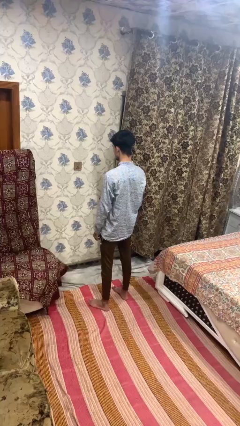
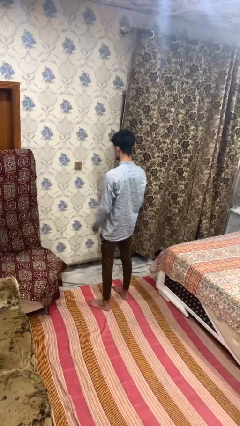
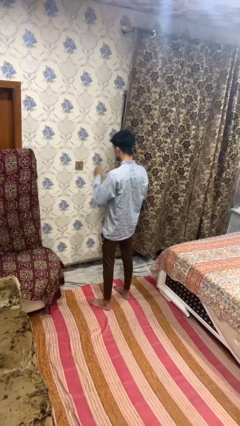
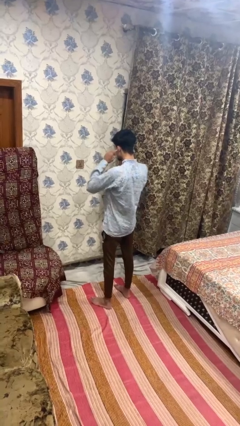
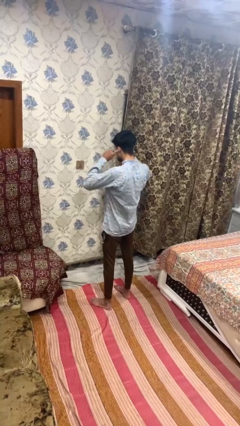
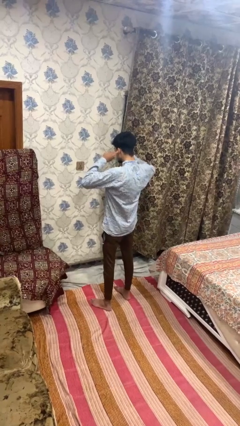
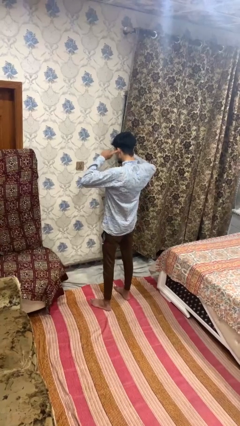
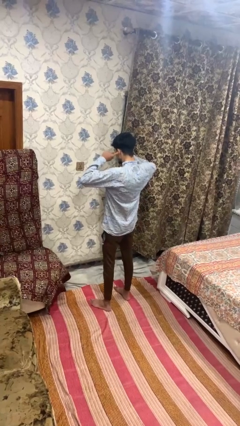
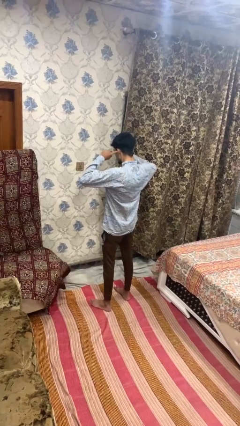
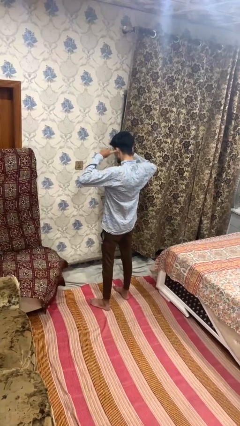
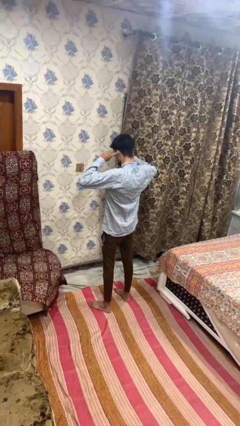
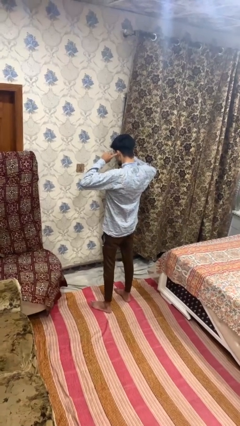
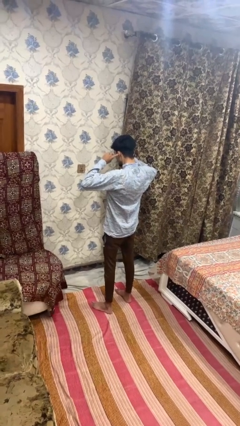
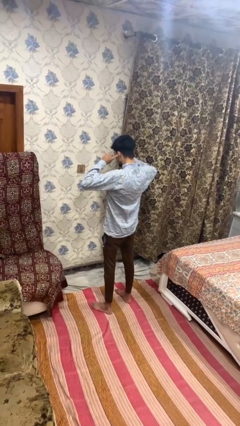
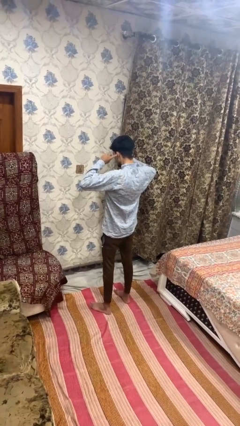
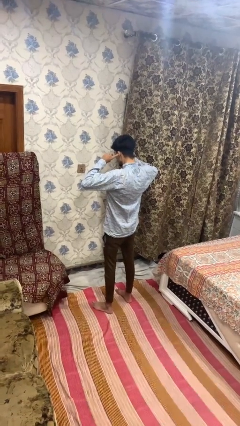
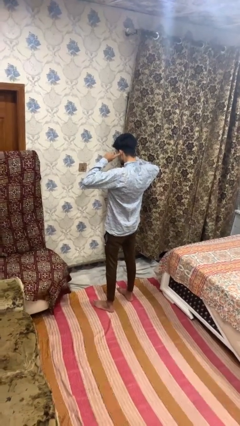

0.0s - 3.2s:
person puts fingers in ear

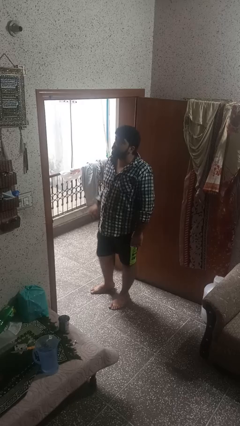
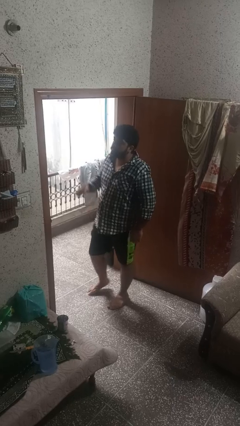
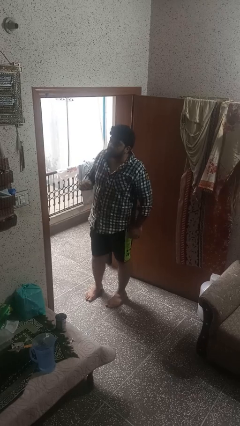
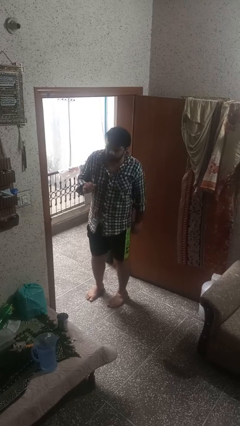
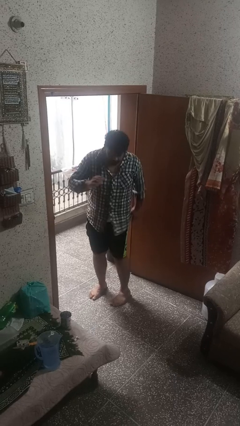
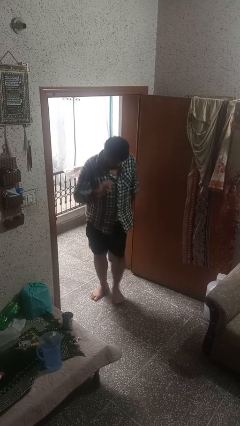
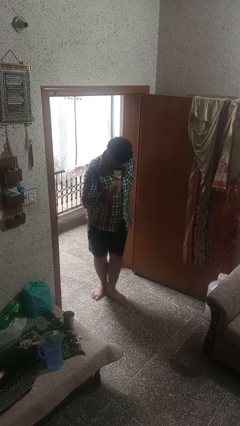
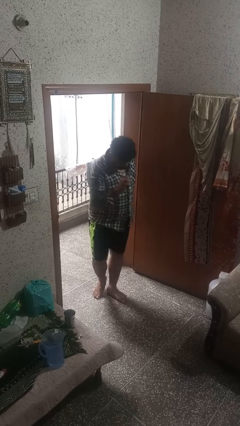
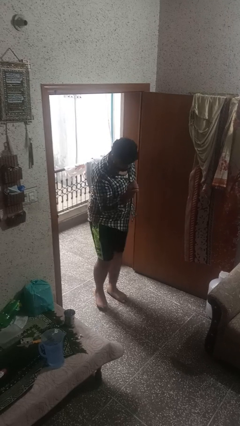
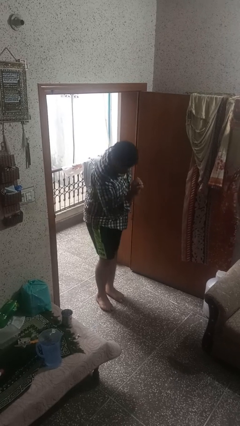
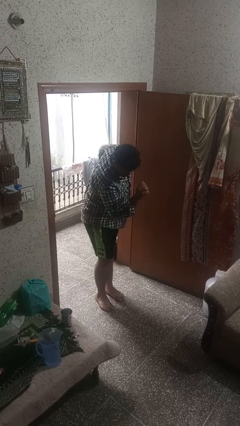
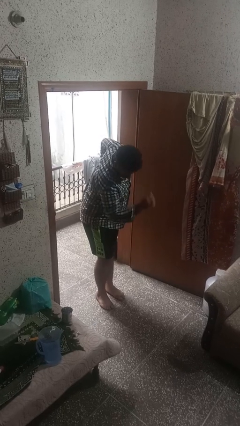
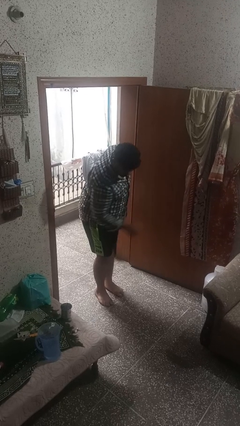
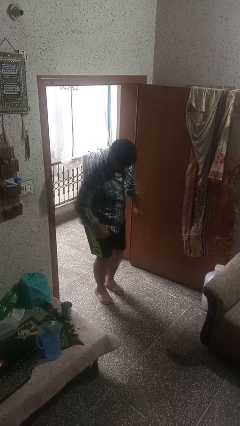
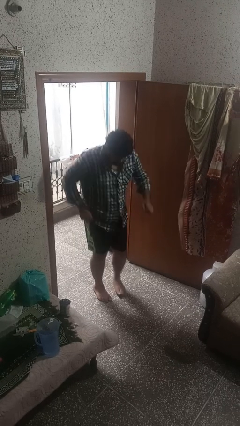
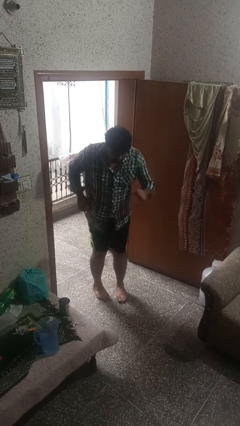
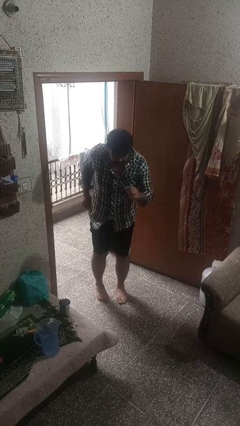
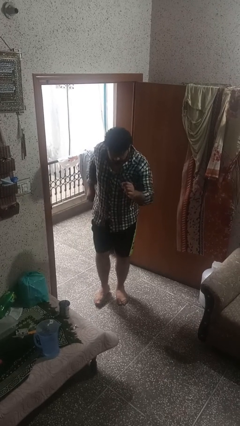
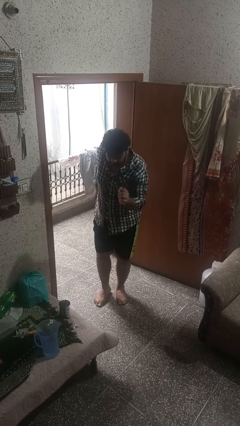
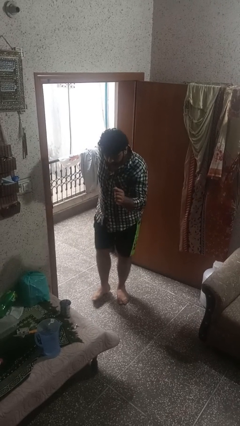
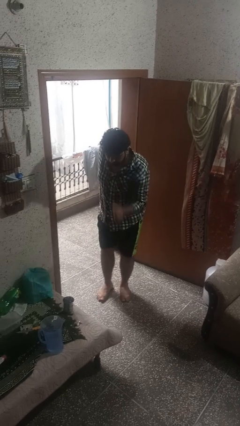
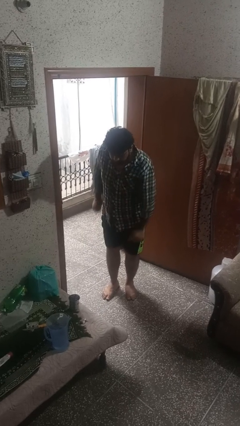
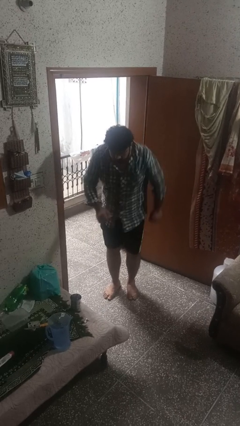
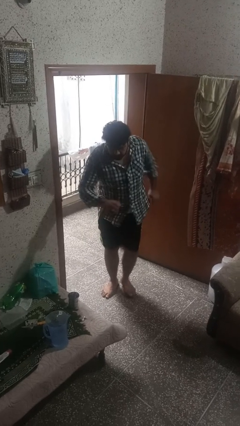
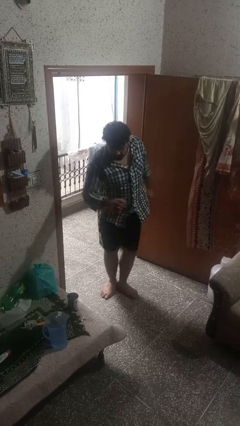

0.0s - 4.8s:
person dances in place

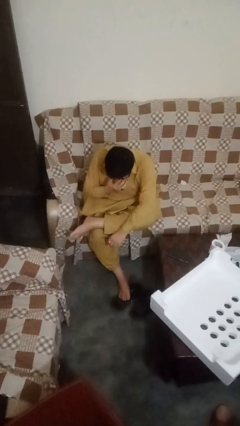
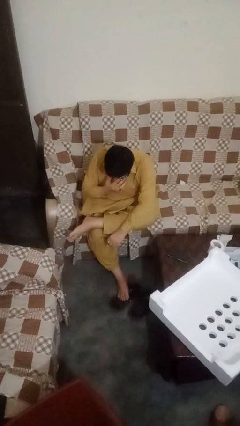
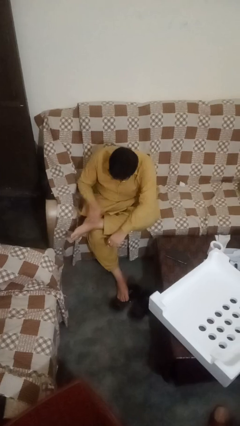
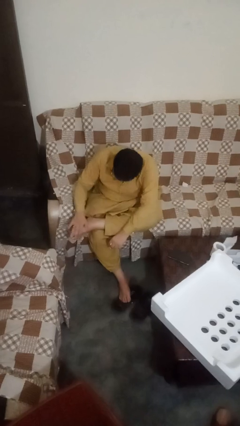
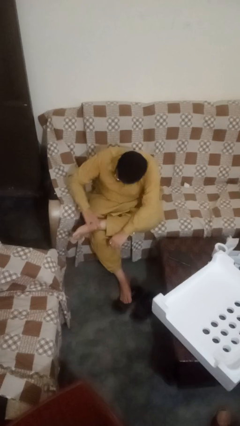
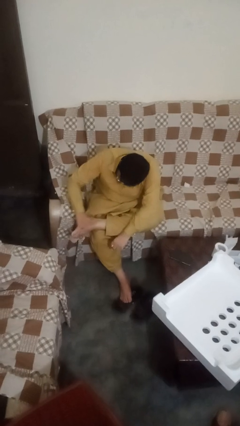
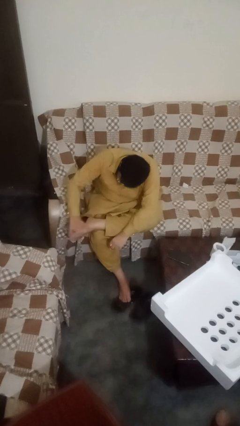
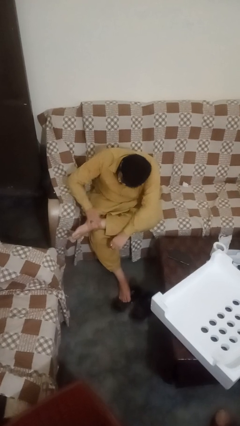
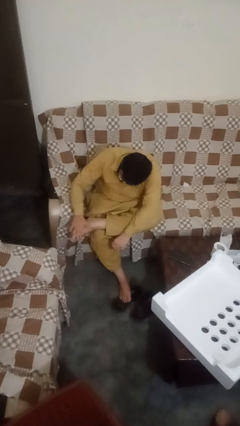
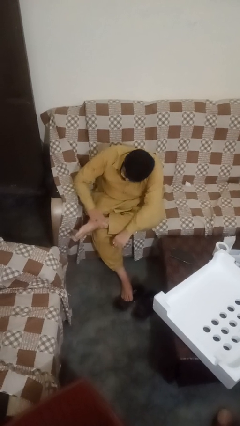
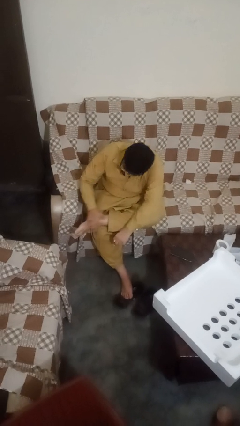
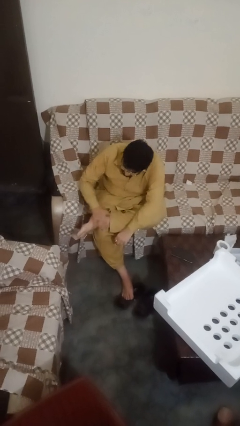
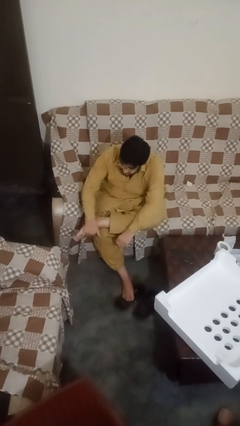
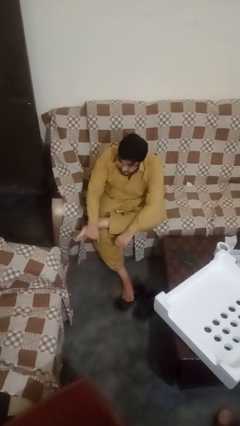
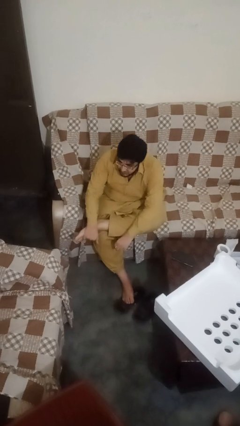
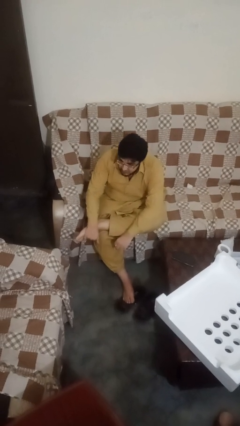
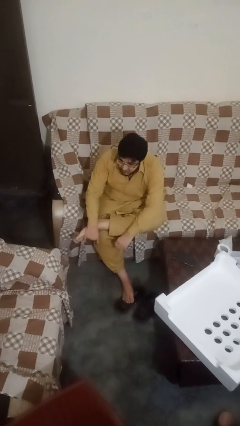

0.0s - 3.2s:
person rubs foot

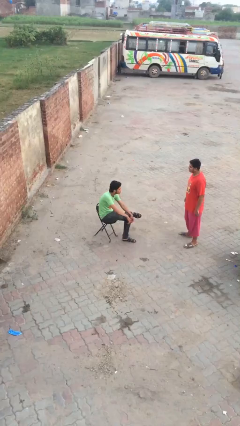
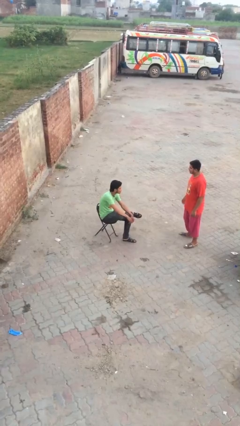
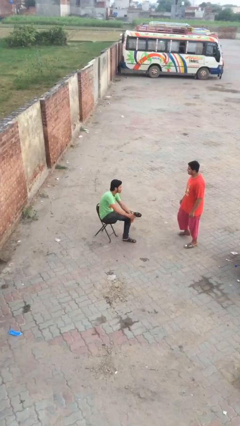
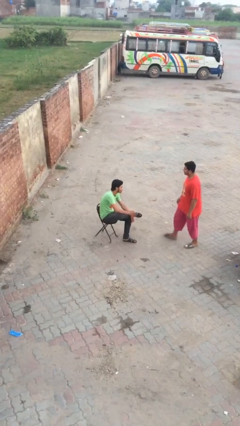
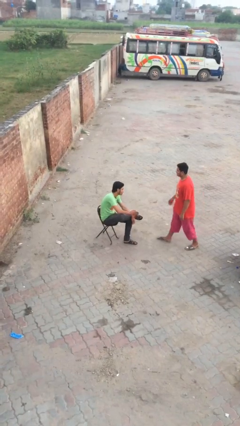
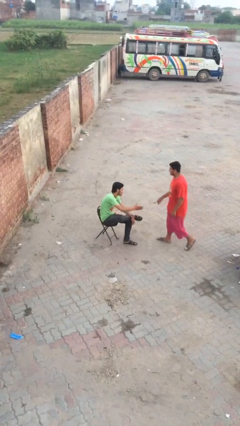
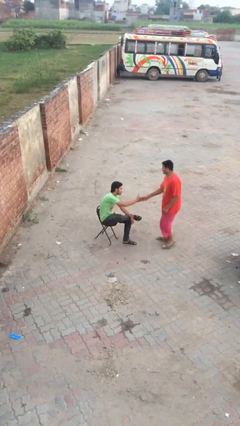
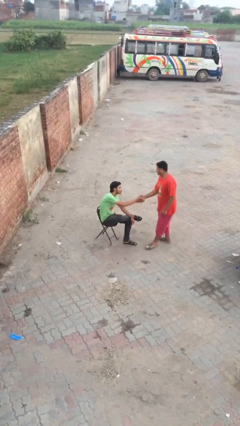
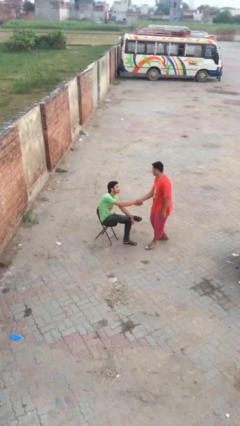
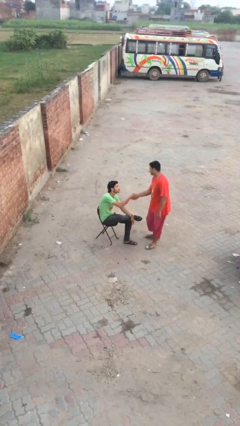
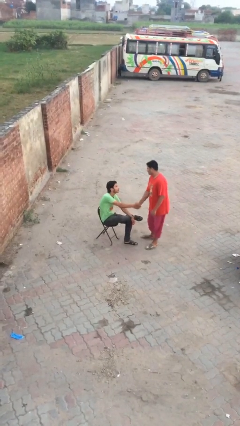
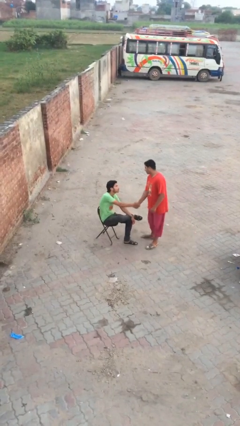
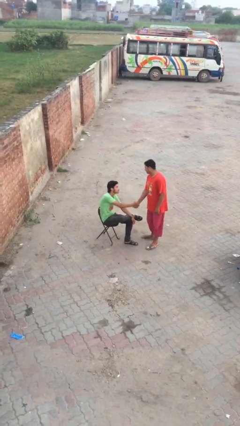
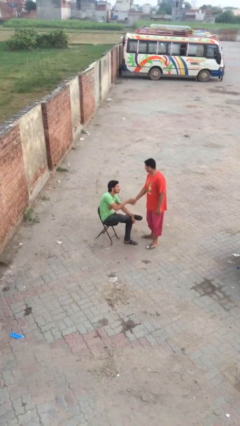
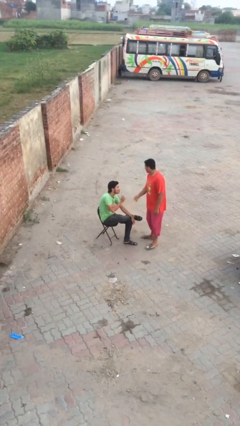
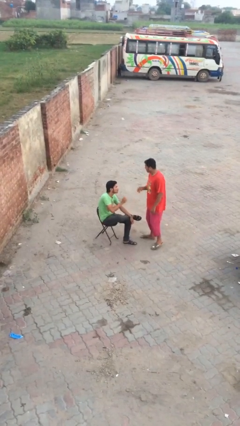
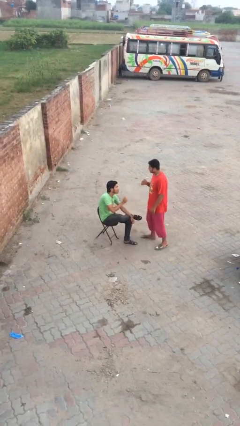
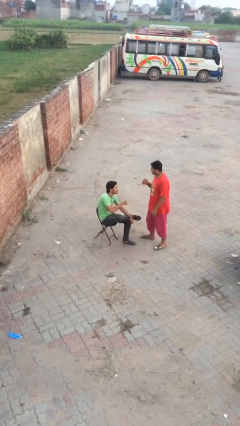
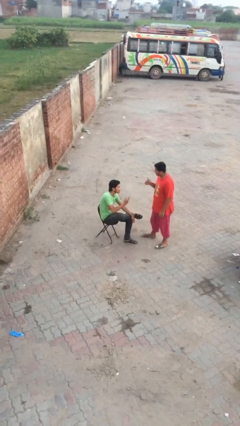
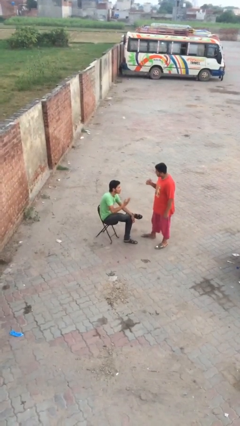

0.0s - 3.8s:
person shakes hand

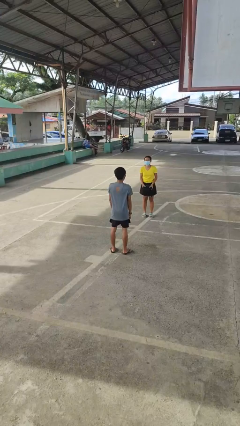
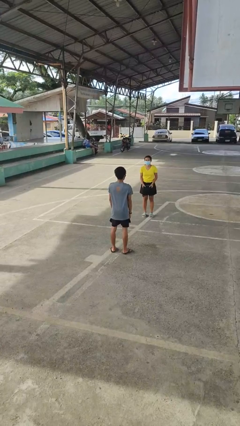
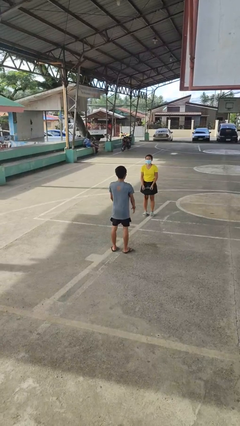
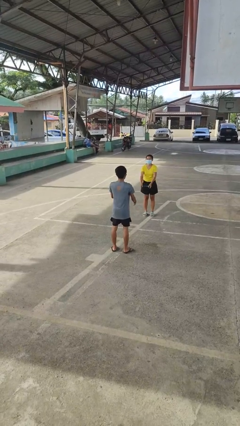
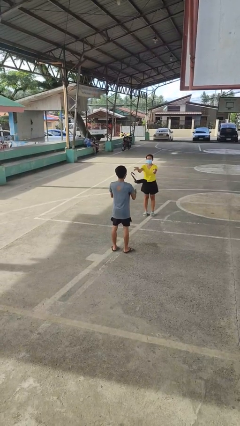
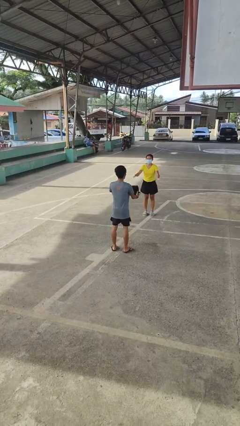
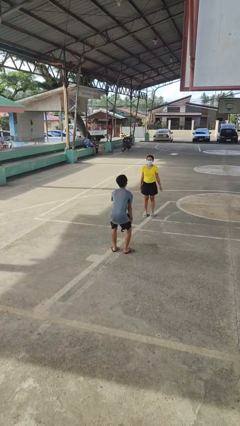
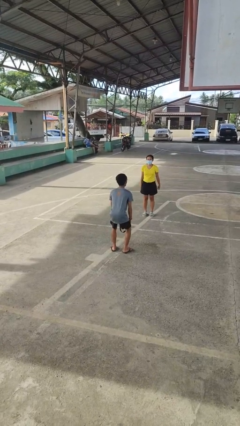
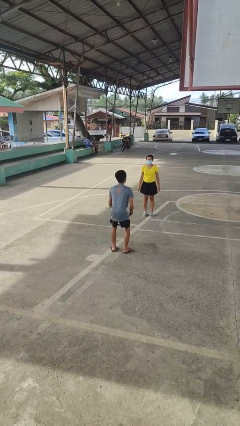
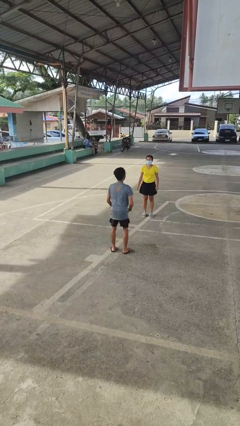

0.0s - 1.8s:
person catches object from person

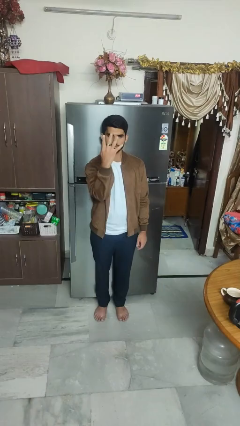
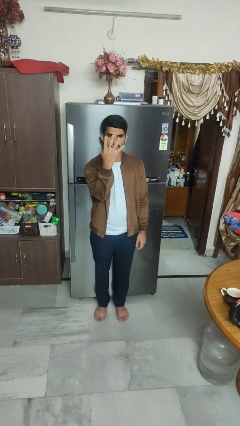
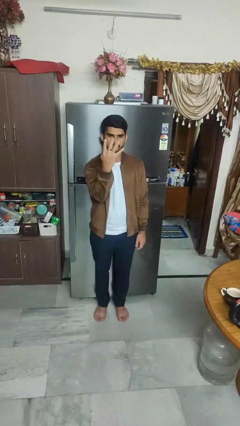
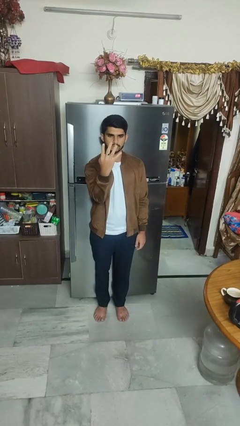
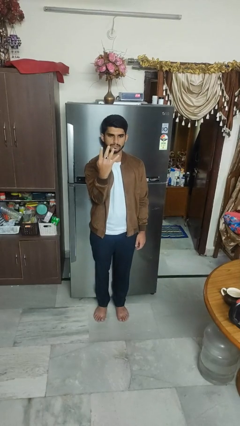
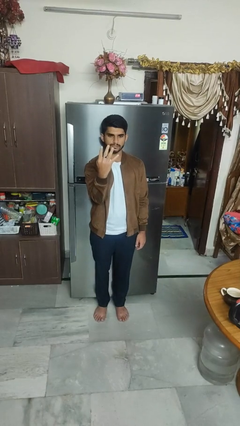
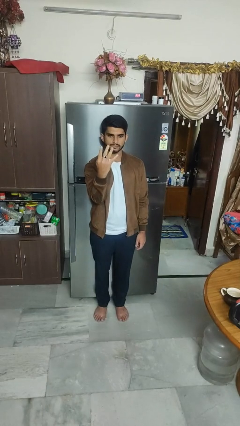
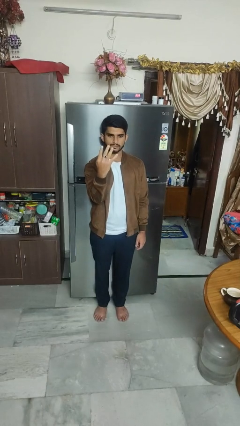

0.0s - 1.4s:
person gestures number four
